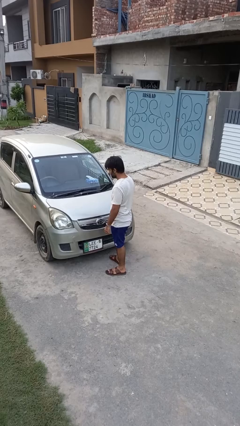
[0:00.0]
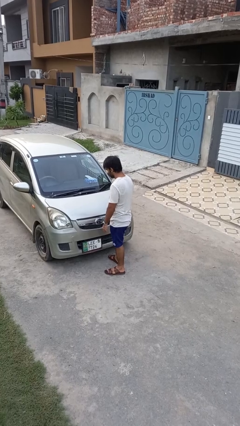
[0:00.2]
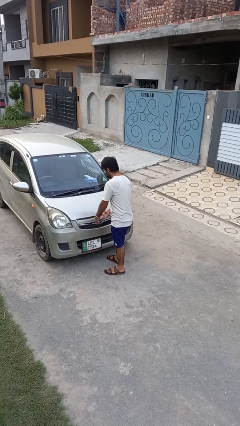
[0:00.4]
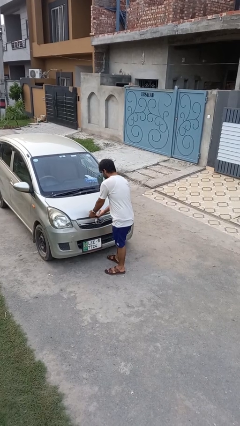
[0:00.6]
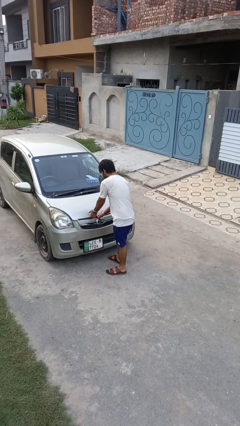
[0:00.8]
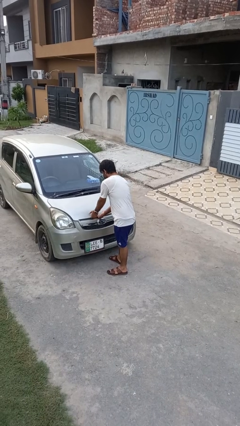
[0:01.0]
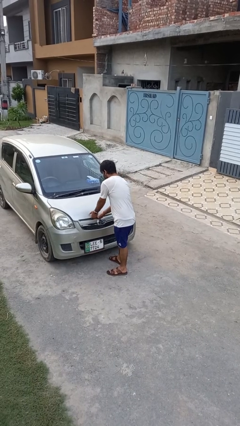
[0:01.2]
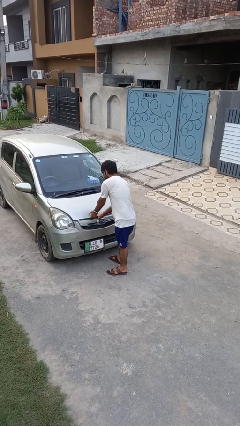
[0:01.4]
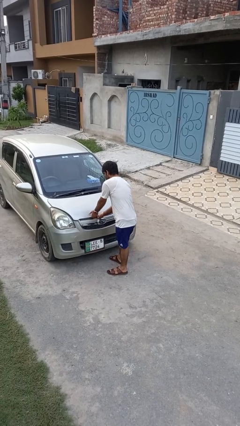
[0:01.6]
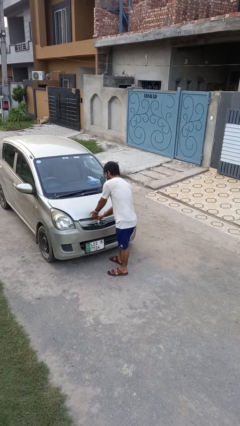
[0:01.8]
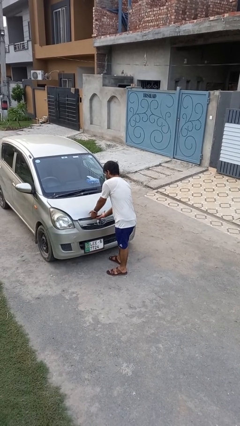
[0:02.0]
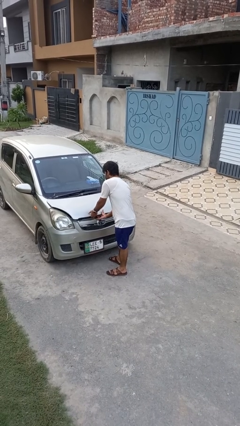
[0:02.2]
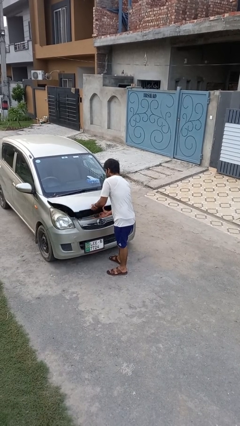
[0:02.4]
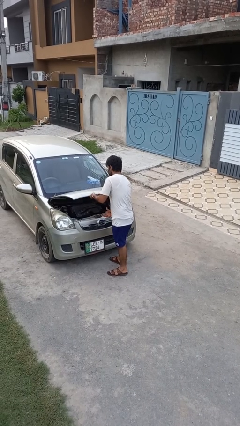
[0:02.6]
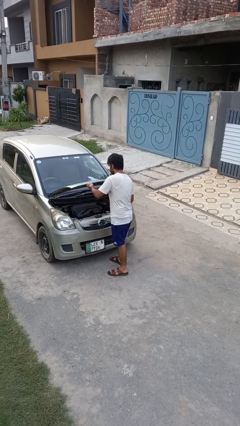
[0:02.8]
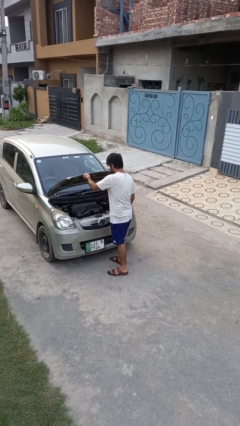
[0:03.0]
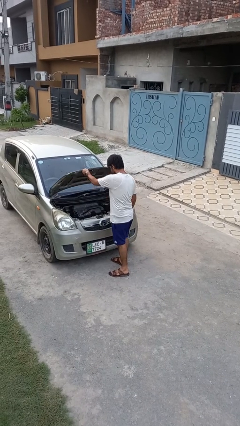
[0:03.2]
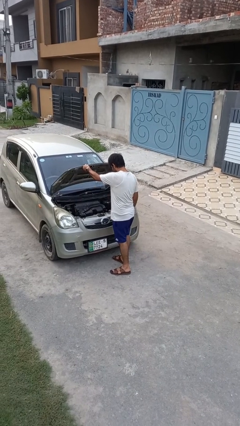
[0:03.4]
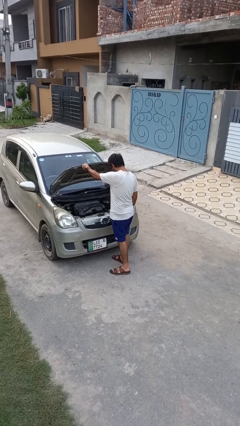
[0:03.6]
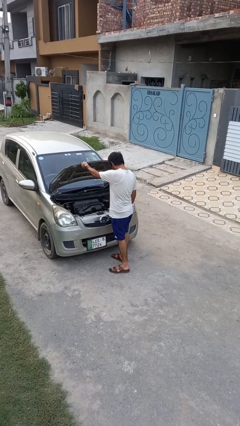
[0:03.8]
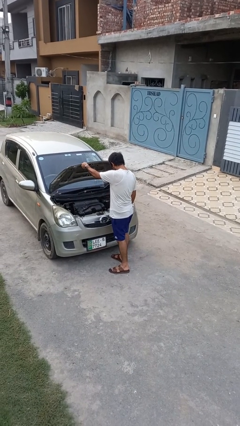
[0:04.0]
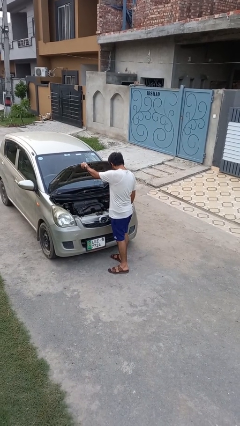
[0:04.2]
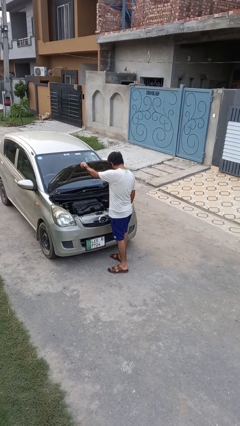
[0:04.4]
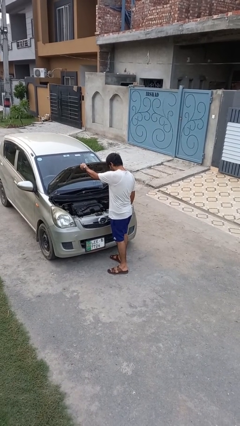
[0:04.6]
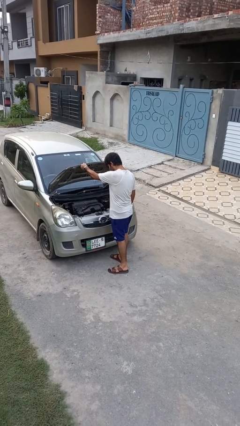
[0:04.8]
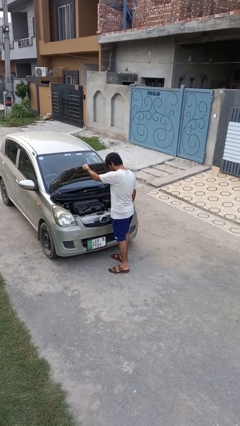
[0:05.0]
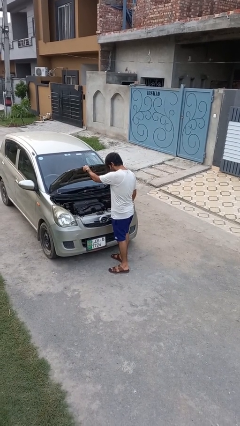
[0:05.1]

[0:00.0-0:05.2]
person opens car hood

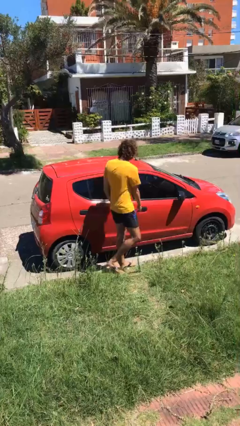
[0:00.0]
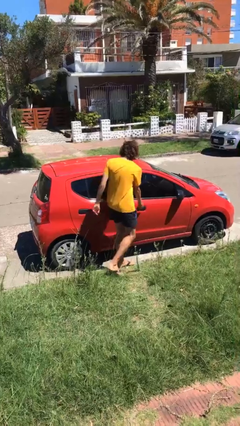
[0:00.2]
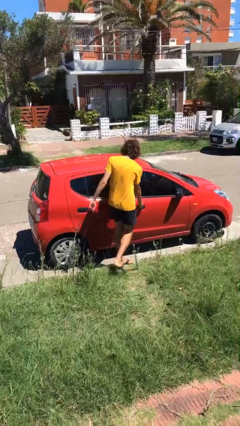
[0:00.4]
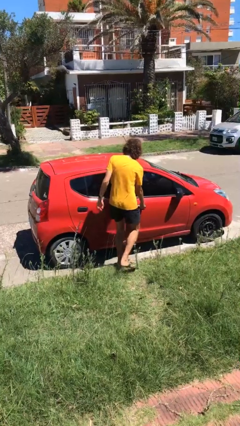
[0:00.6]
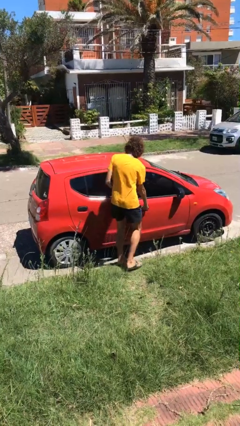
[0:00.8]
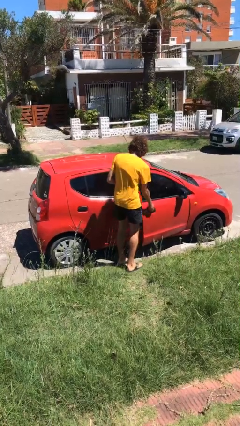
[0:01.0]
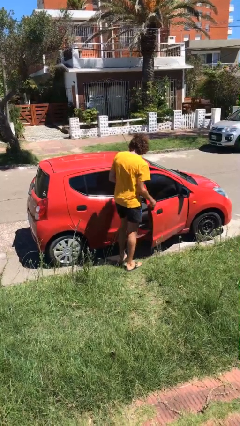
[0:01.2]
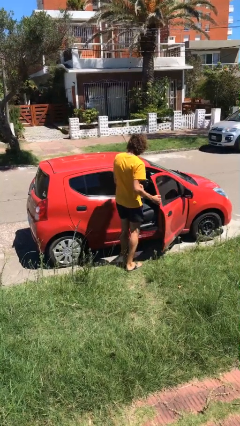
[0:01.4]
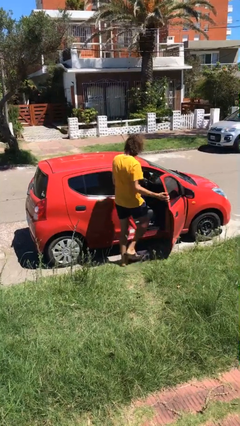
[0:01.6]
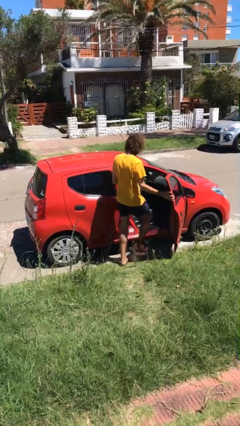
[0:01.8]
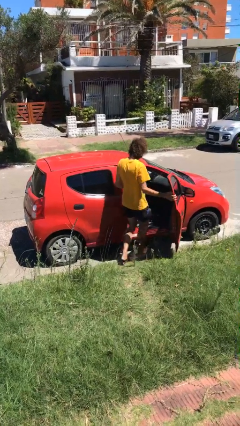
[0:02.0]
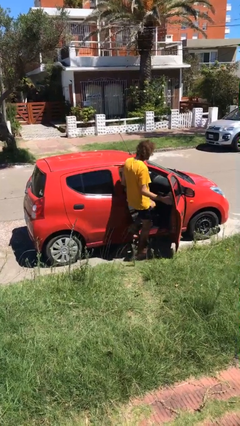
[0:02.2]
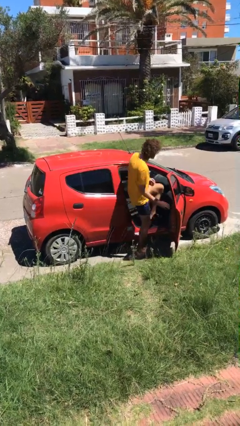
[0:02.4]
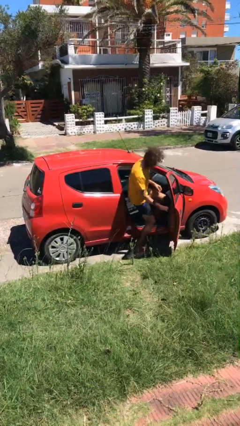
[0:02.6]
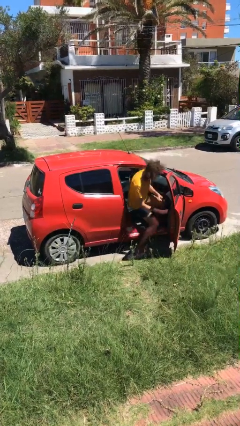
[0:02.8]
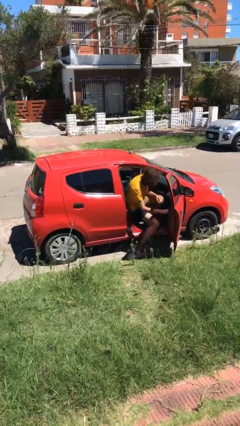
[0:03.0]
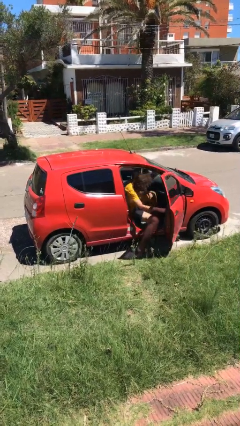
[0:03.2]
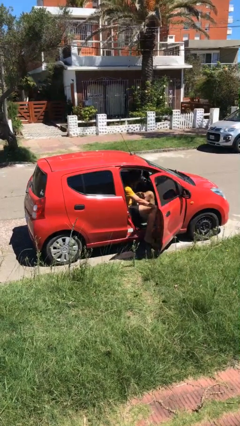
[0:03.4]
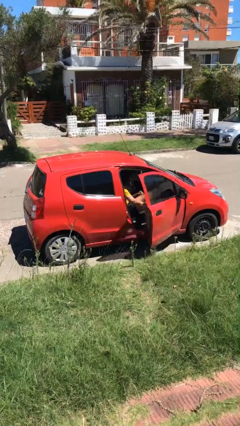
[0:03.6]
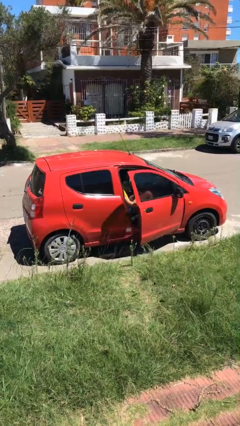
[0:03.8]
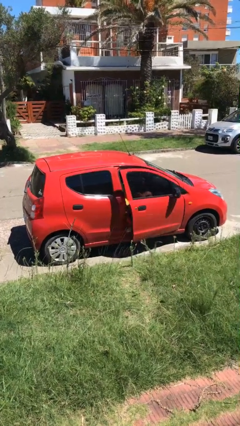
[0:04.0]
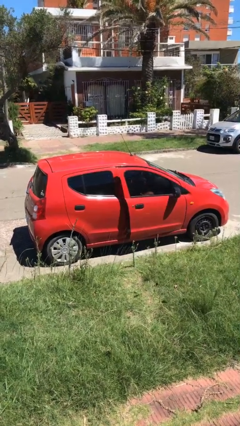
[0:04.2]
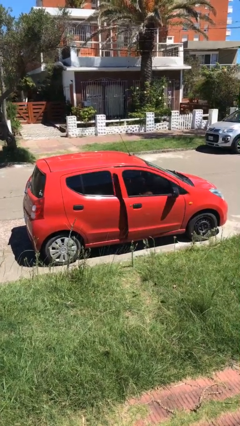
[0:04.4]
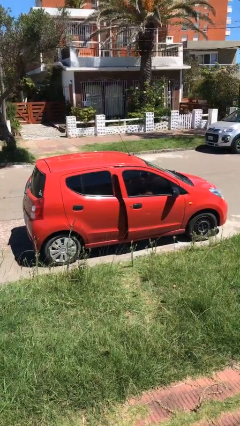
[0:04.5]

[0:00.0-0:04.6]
car picks up person

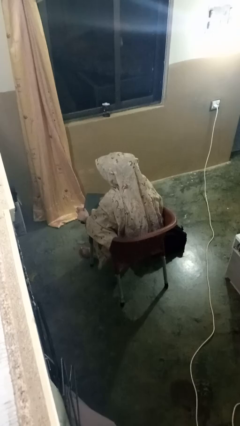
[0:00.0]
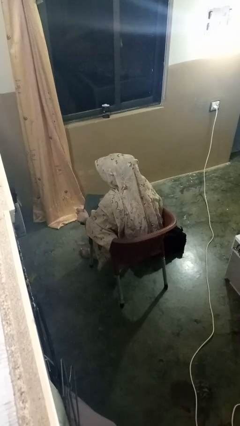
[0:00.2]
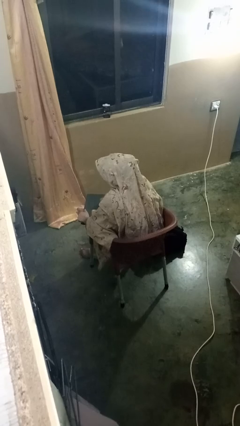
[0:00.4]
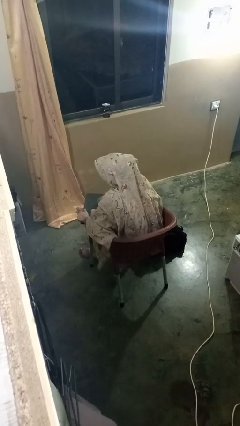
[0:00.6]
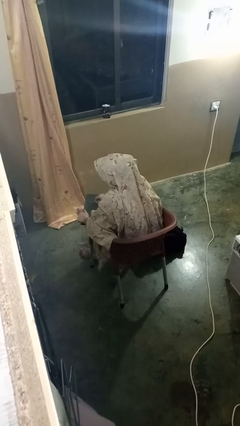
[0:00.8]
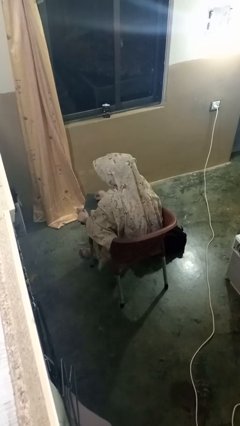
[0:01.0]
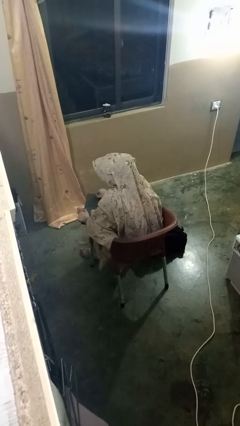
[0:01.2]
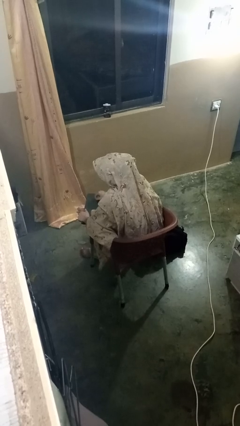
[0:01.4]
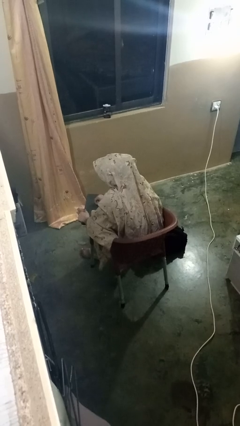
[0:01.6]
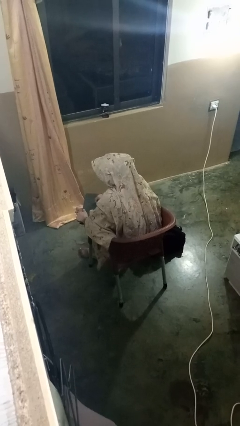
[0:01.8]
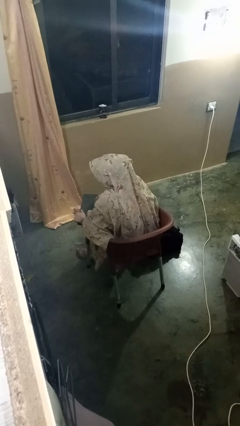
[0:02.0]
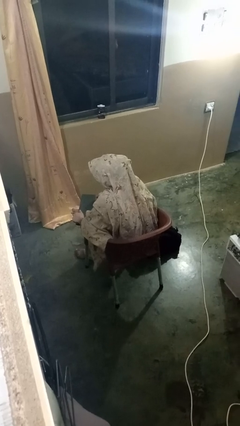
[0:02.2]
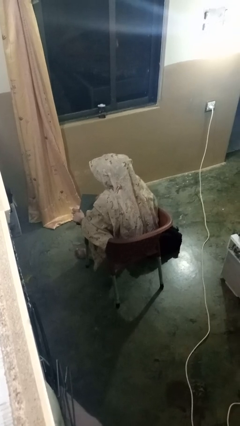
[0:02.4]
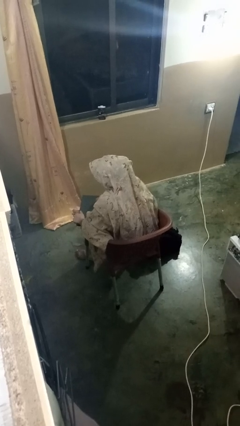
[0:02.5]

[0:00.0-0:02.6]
person interacts with tablet

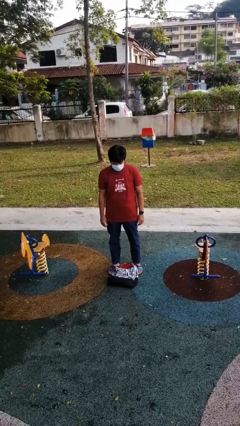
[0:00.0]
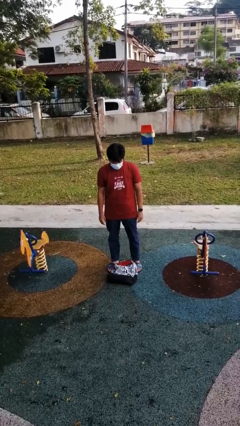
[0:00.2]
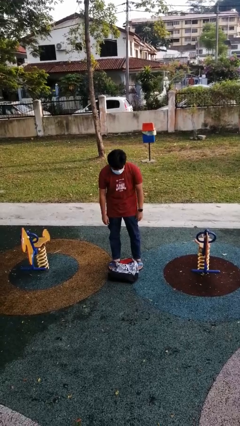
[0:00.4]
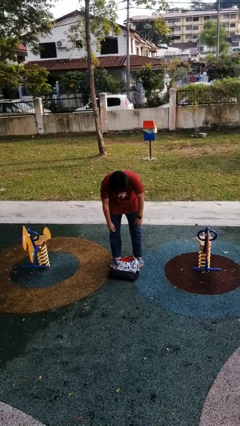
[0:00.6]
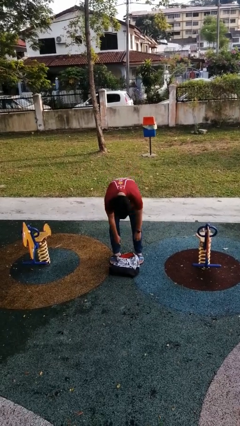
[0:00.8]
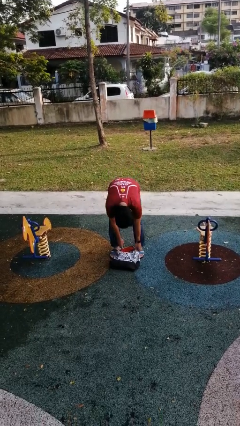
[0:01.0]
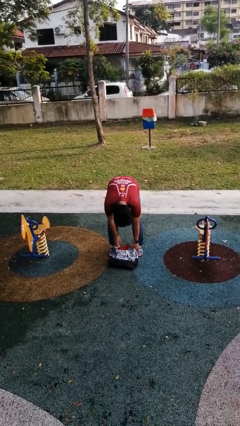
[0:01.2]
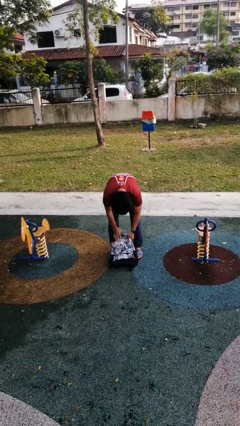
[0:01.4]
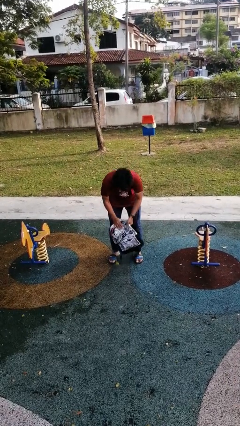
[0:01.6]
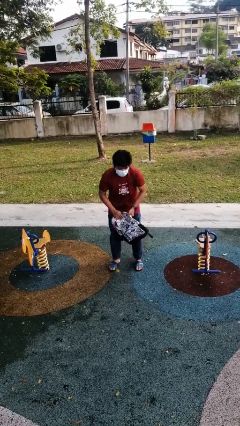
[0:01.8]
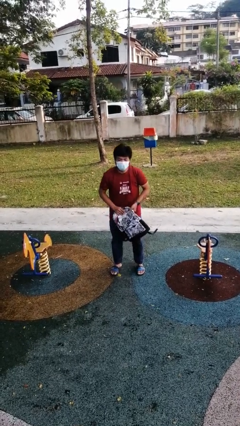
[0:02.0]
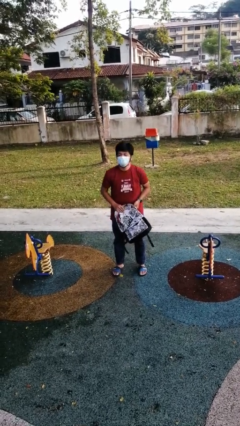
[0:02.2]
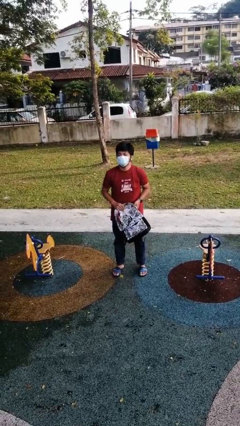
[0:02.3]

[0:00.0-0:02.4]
person picks up object from floor

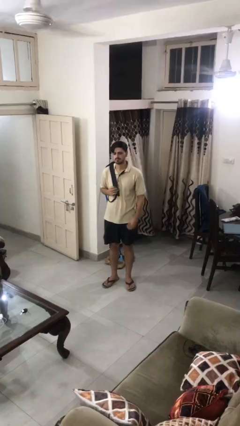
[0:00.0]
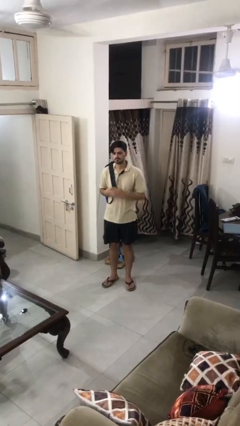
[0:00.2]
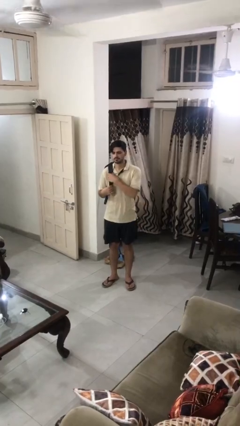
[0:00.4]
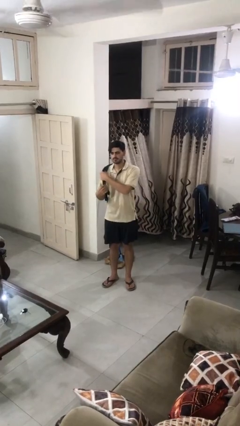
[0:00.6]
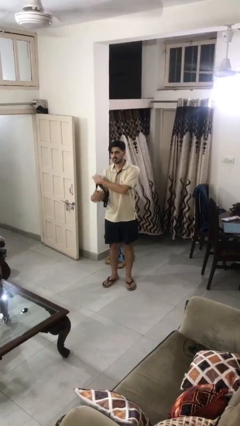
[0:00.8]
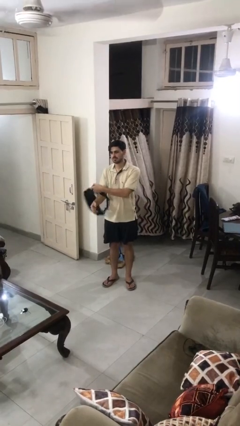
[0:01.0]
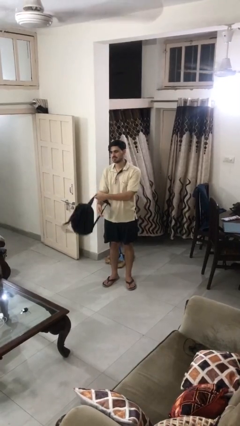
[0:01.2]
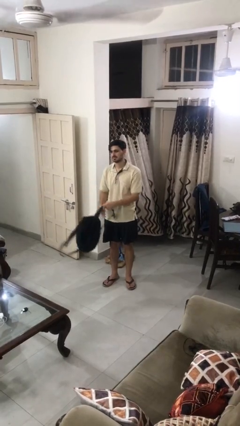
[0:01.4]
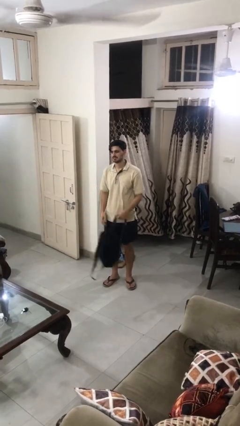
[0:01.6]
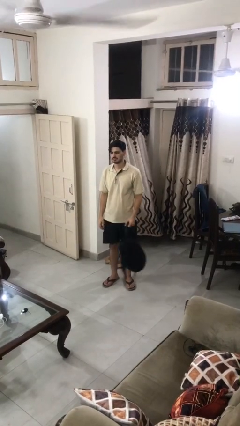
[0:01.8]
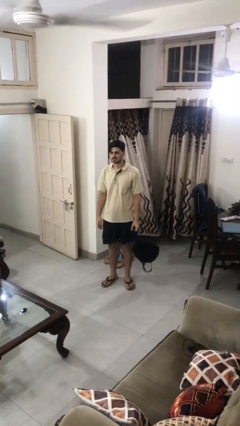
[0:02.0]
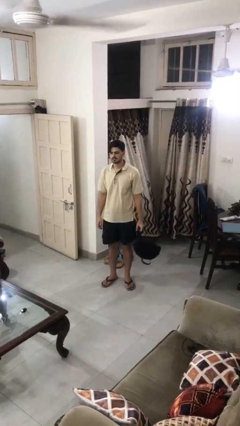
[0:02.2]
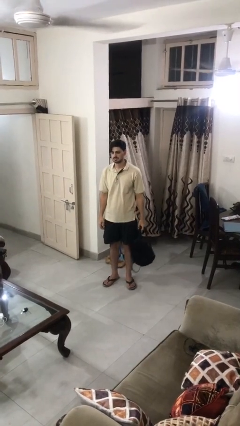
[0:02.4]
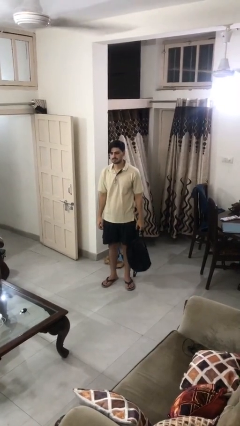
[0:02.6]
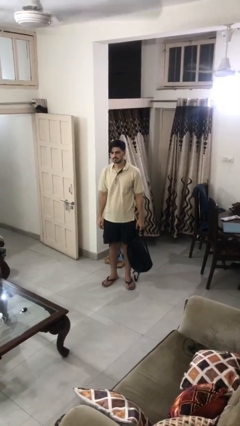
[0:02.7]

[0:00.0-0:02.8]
person takes off backpack

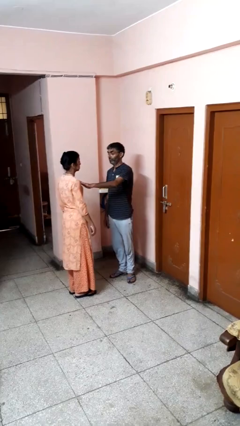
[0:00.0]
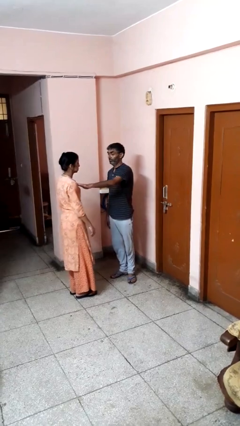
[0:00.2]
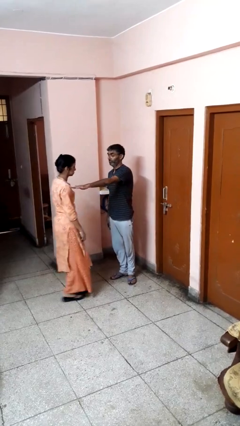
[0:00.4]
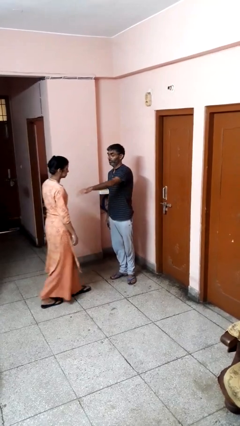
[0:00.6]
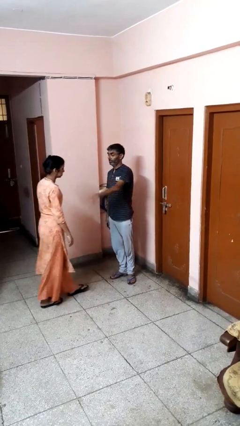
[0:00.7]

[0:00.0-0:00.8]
person shoves person
